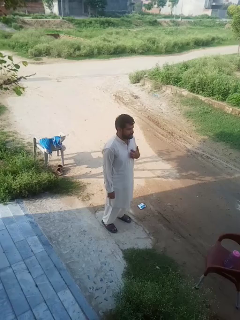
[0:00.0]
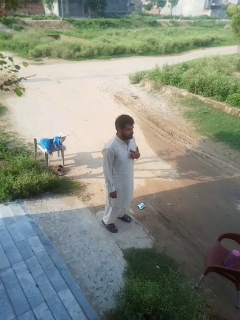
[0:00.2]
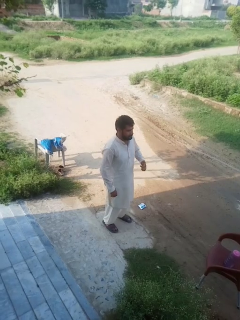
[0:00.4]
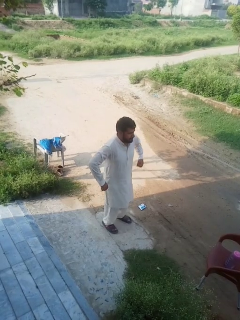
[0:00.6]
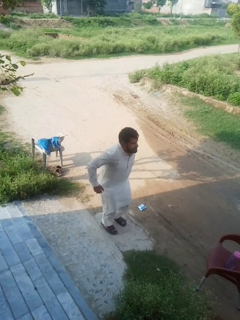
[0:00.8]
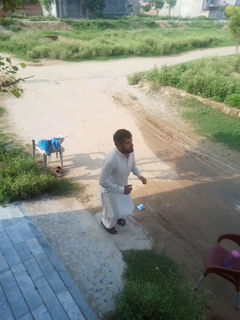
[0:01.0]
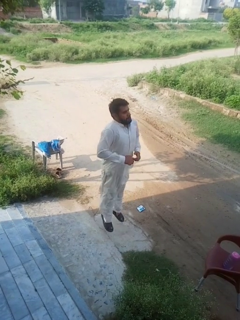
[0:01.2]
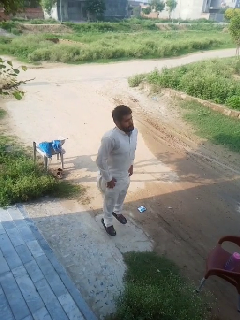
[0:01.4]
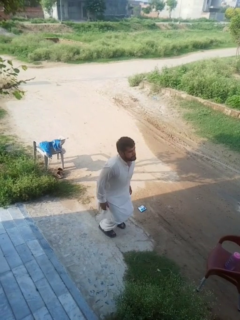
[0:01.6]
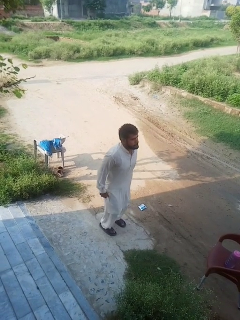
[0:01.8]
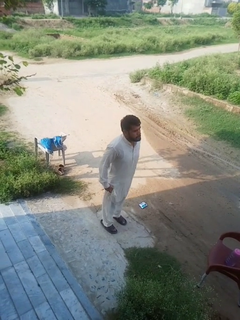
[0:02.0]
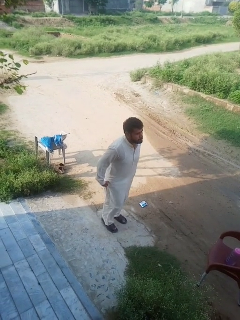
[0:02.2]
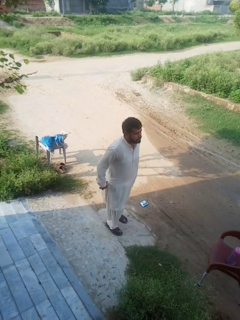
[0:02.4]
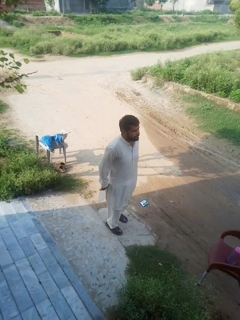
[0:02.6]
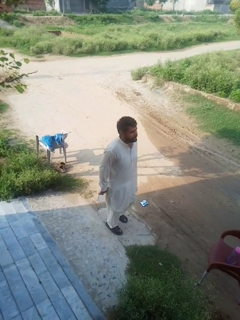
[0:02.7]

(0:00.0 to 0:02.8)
person jumps

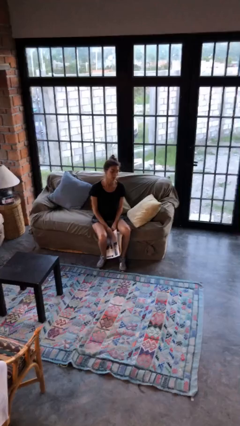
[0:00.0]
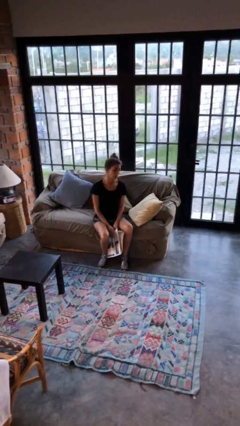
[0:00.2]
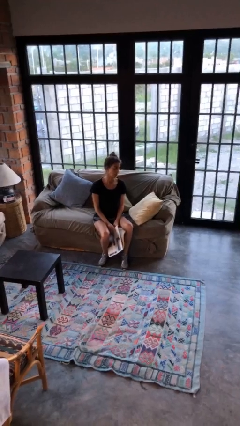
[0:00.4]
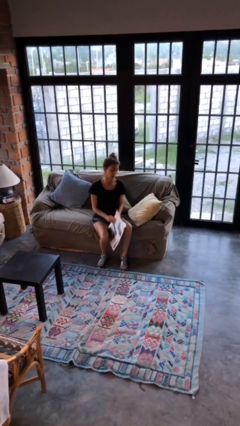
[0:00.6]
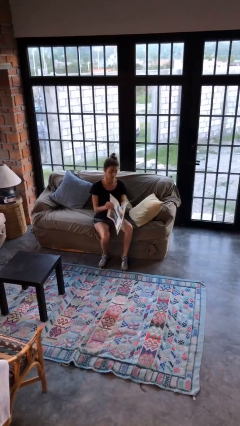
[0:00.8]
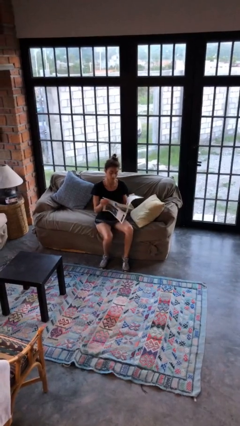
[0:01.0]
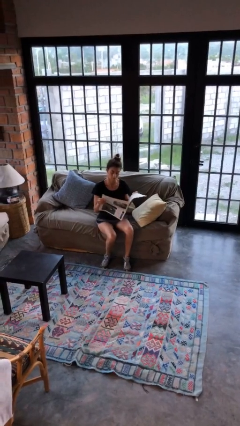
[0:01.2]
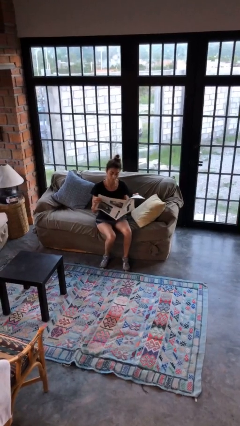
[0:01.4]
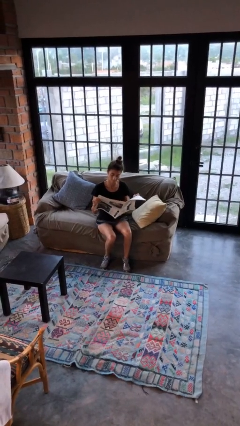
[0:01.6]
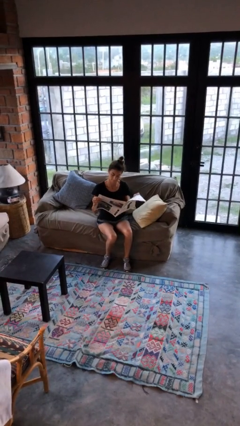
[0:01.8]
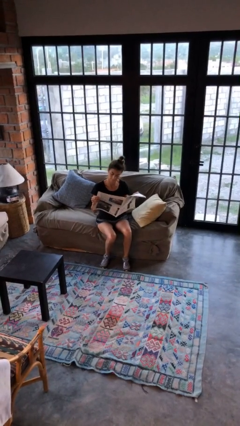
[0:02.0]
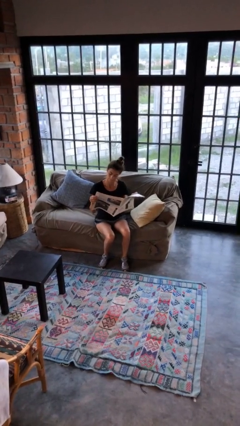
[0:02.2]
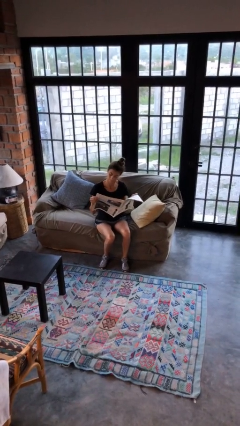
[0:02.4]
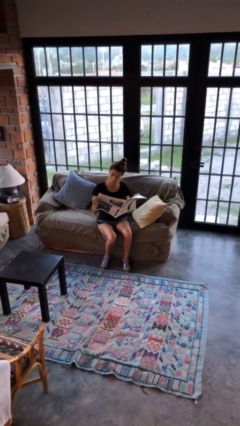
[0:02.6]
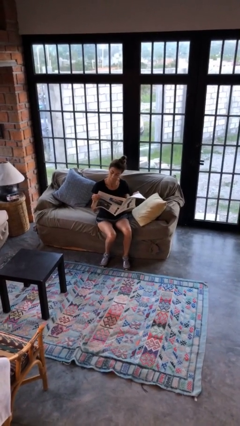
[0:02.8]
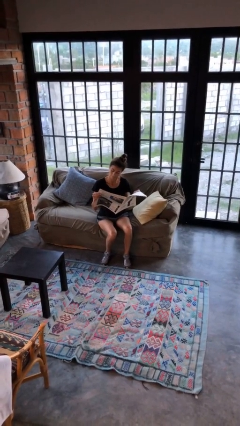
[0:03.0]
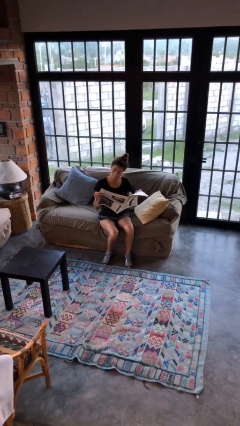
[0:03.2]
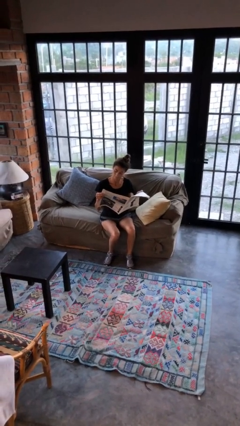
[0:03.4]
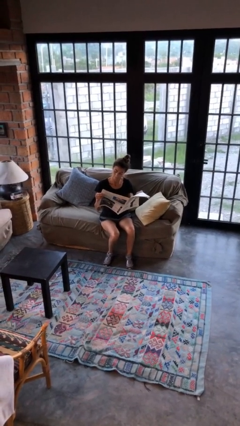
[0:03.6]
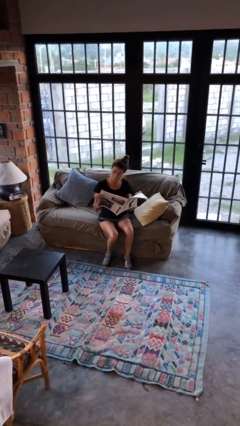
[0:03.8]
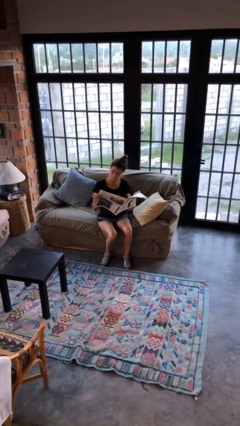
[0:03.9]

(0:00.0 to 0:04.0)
person reads newspaper

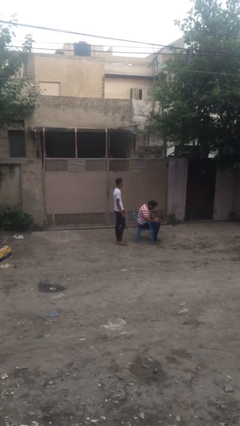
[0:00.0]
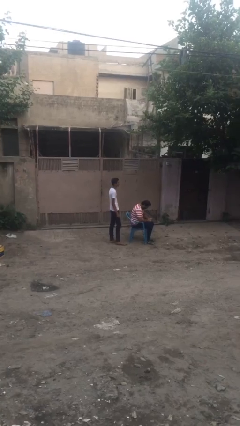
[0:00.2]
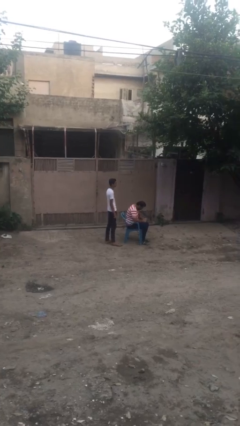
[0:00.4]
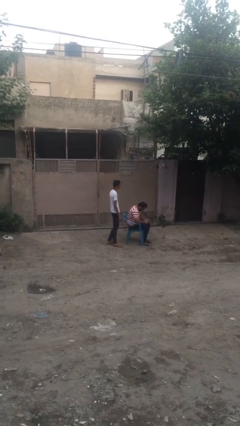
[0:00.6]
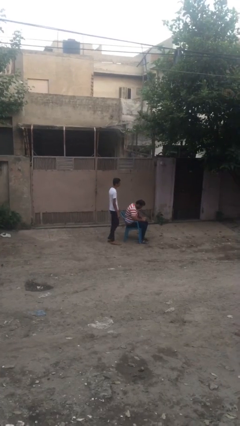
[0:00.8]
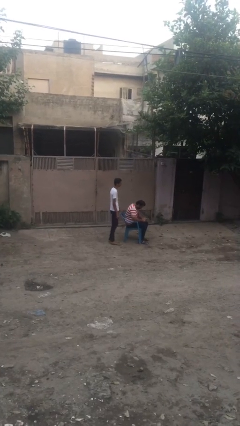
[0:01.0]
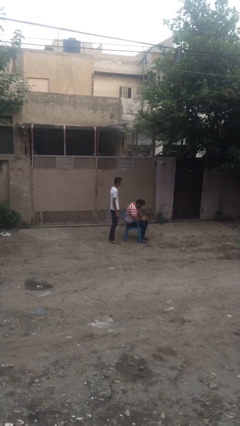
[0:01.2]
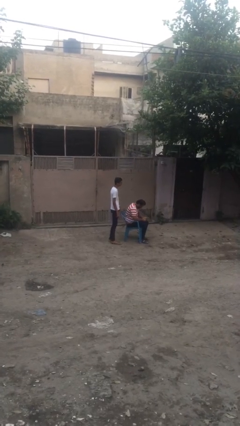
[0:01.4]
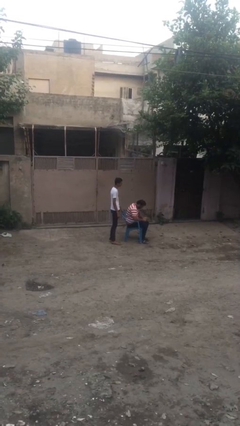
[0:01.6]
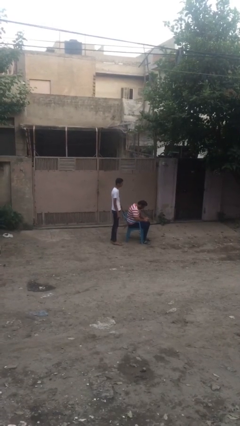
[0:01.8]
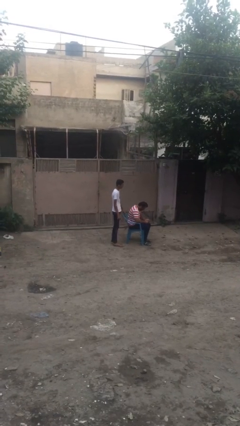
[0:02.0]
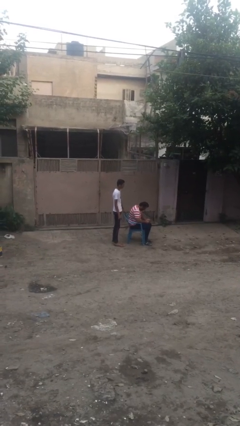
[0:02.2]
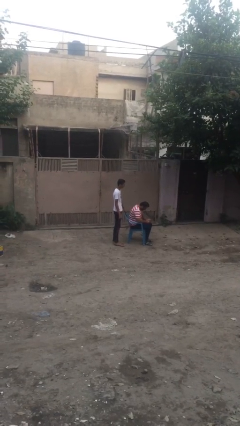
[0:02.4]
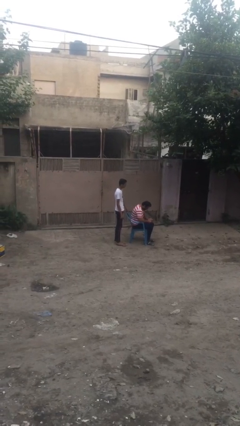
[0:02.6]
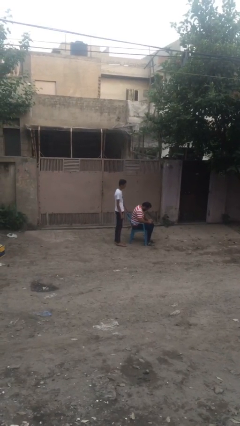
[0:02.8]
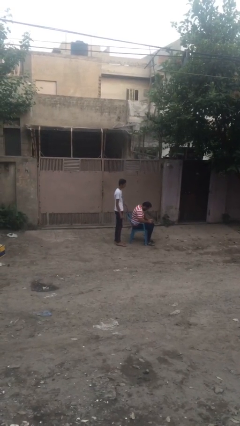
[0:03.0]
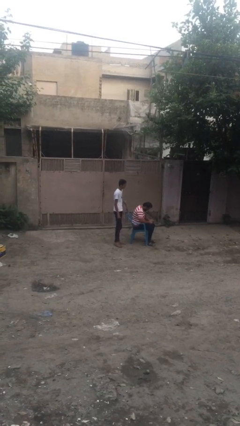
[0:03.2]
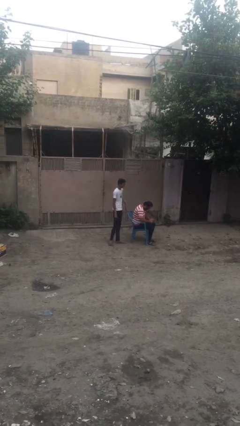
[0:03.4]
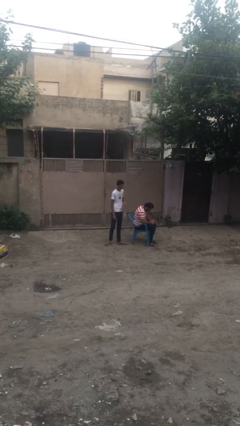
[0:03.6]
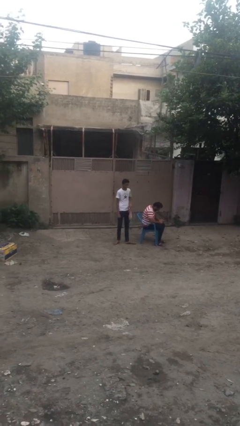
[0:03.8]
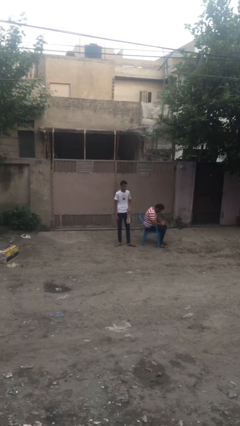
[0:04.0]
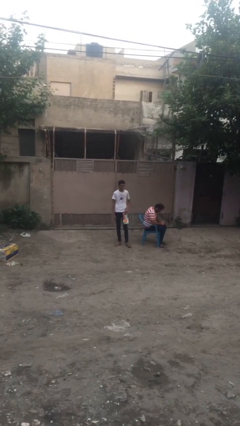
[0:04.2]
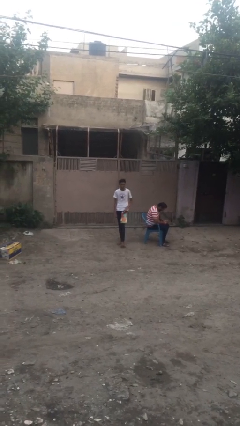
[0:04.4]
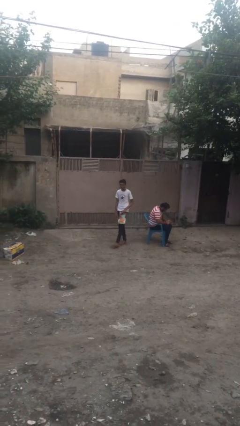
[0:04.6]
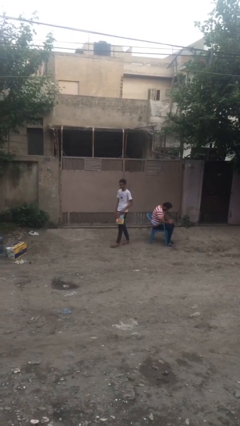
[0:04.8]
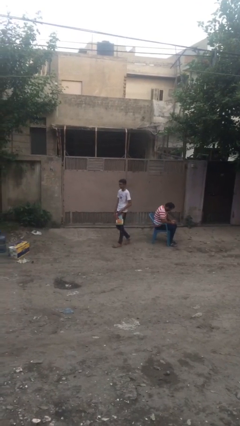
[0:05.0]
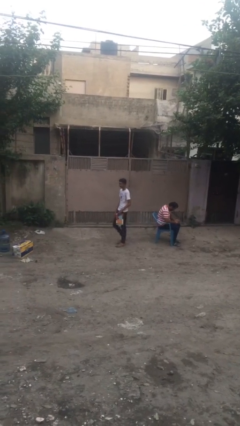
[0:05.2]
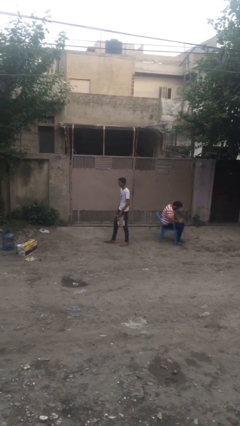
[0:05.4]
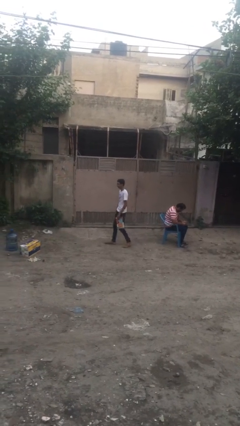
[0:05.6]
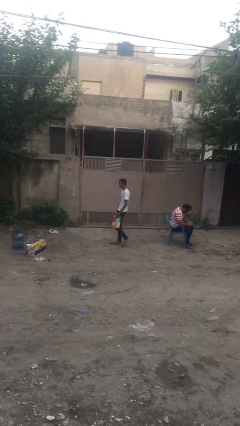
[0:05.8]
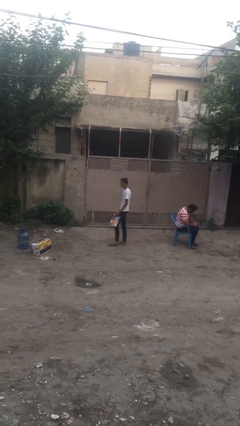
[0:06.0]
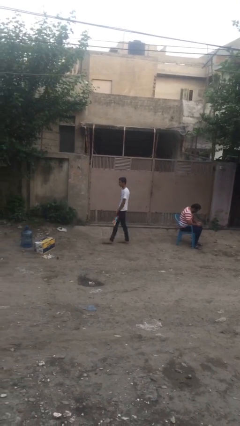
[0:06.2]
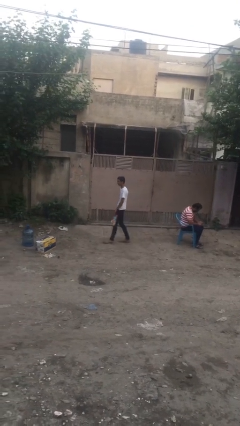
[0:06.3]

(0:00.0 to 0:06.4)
person steals object from person

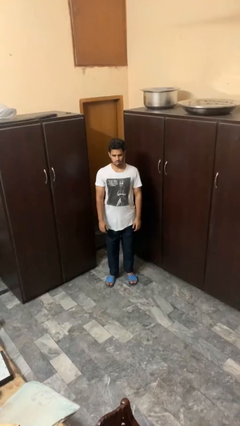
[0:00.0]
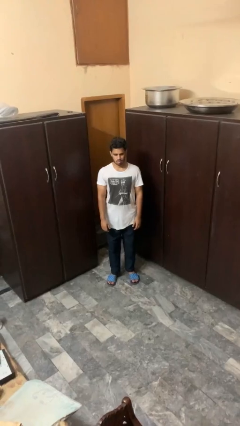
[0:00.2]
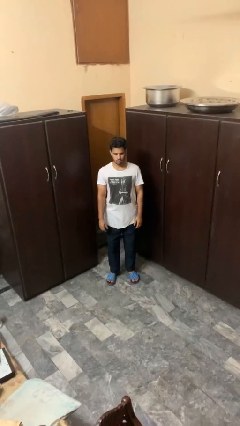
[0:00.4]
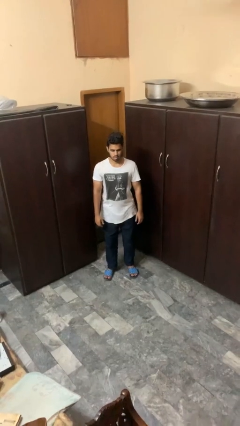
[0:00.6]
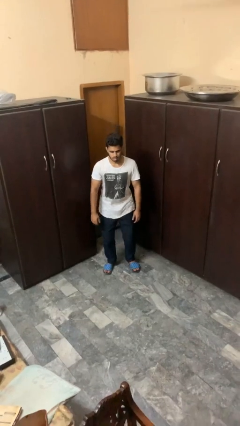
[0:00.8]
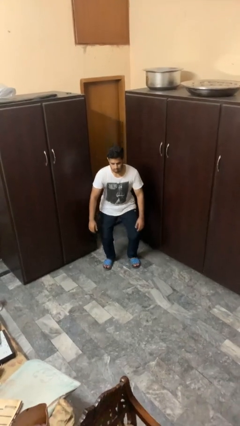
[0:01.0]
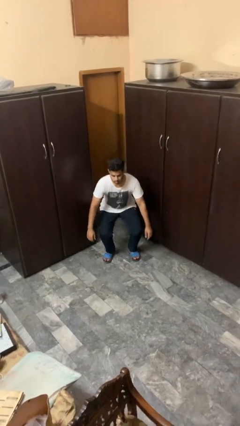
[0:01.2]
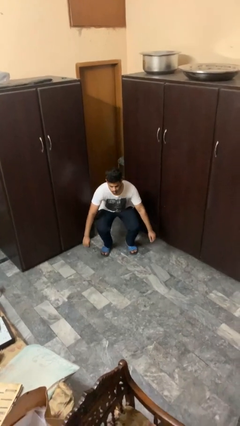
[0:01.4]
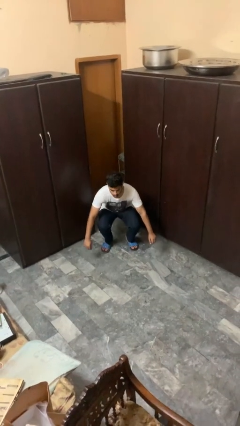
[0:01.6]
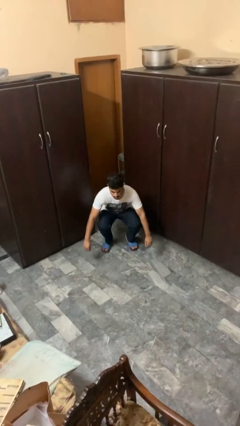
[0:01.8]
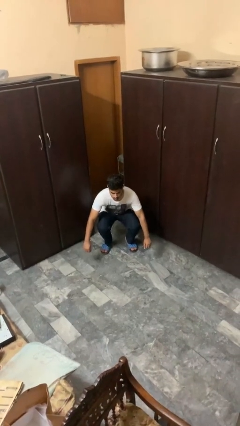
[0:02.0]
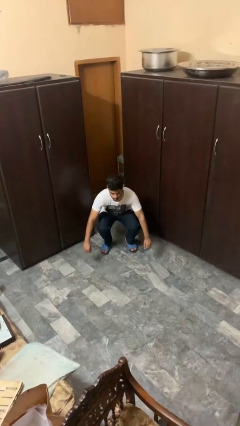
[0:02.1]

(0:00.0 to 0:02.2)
person squats

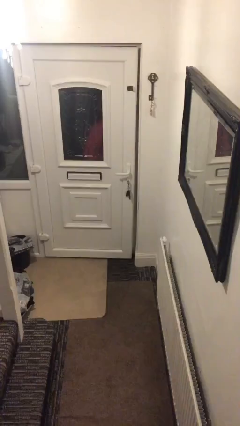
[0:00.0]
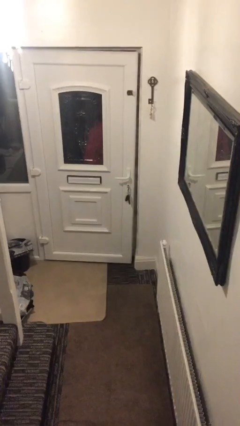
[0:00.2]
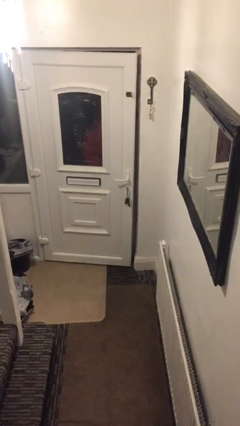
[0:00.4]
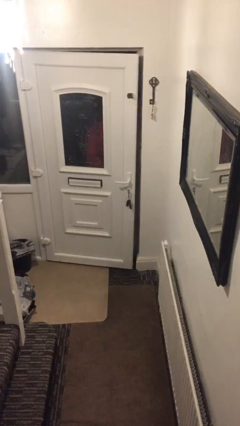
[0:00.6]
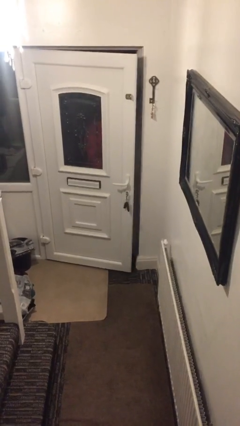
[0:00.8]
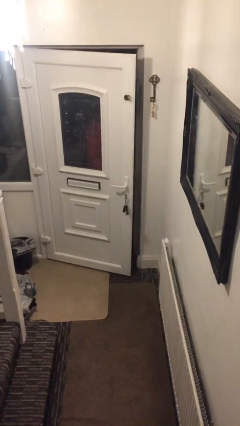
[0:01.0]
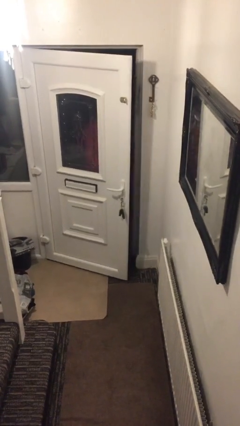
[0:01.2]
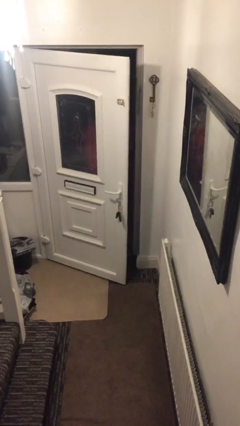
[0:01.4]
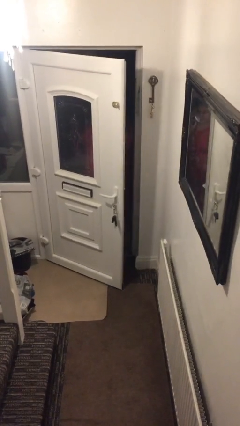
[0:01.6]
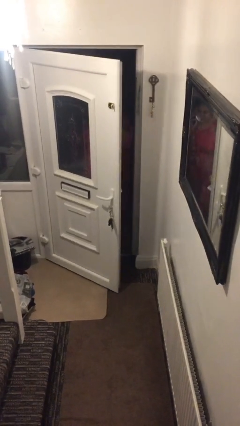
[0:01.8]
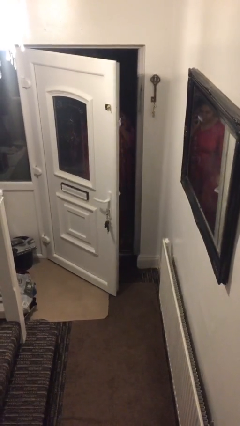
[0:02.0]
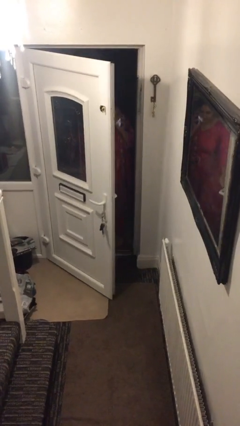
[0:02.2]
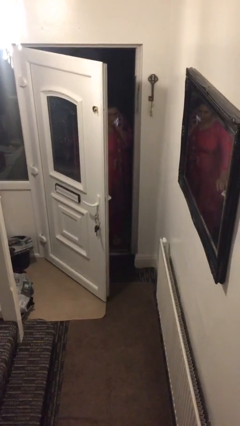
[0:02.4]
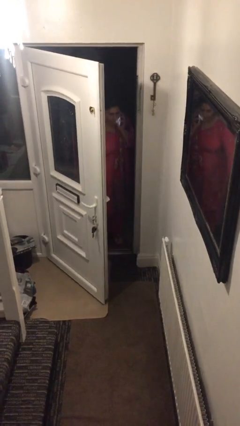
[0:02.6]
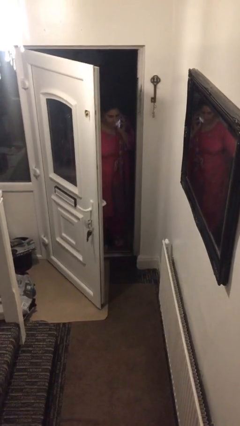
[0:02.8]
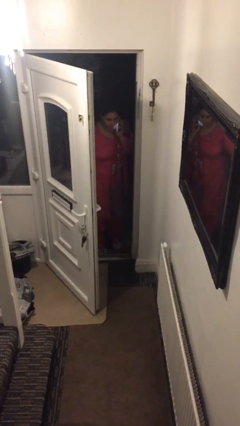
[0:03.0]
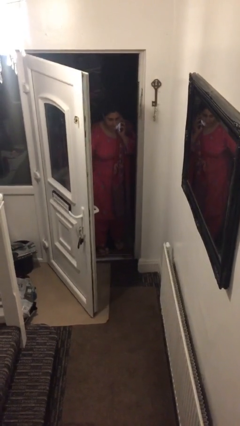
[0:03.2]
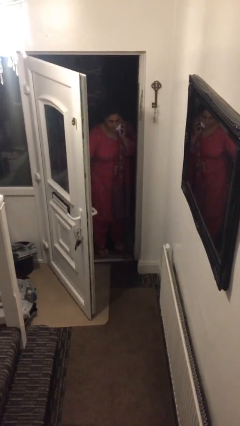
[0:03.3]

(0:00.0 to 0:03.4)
person opens facility door
